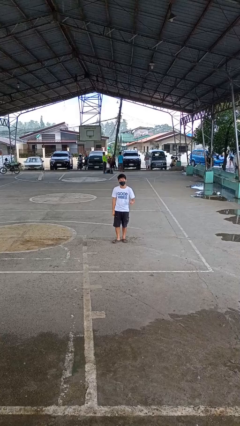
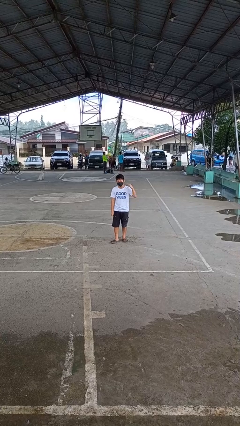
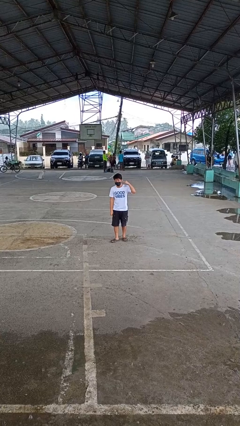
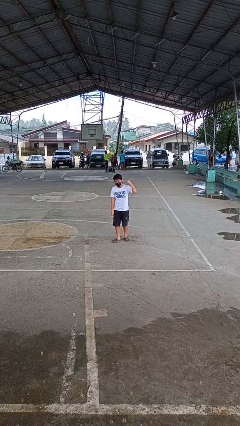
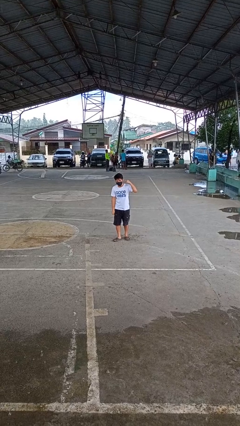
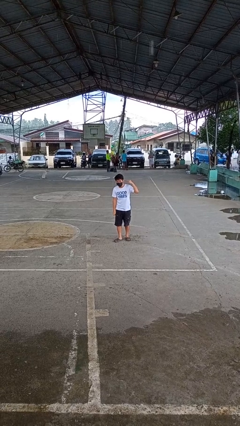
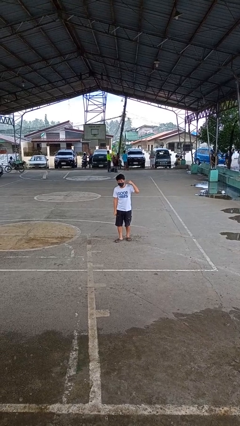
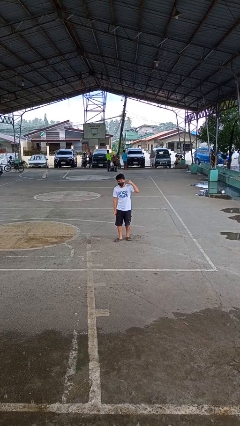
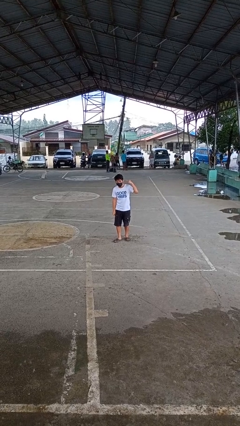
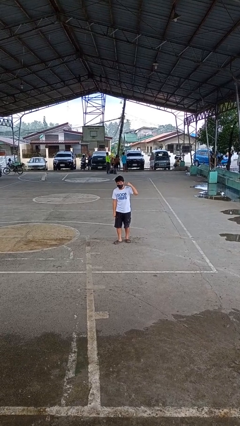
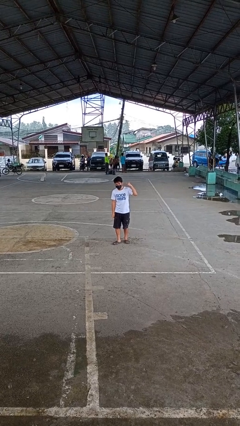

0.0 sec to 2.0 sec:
person gestures listen closely

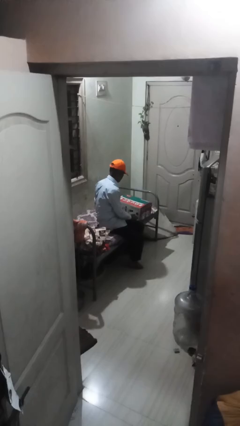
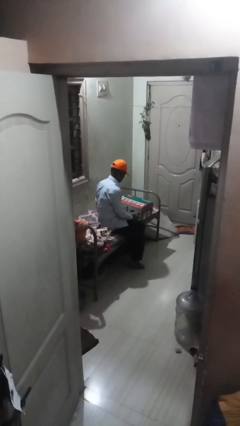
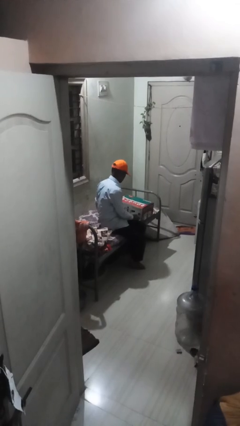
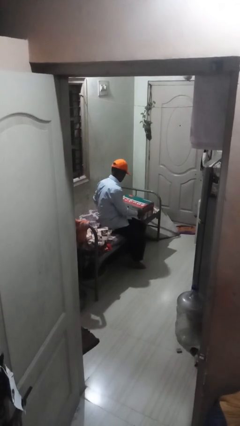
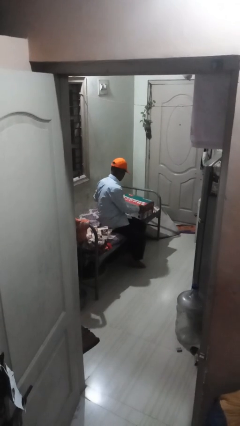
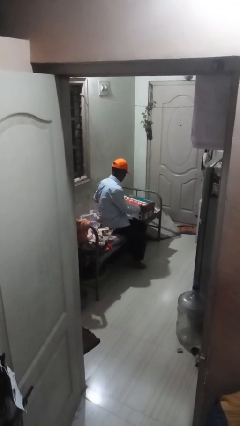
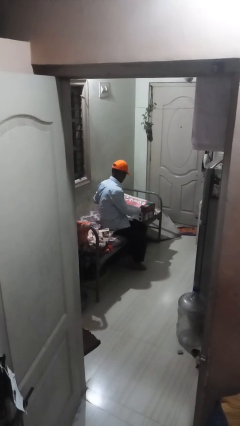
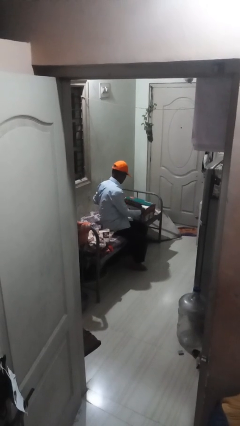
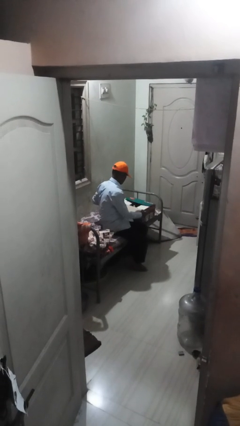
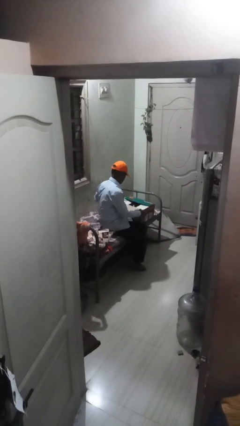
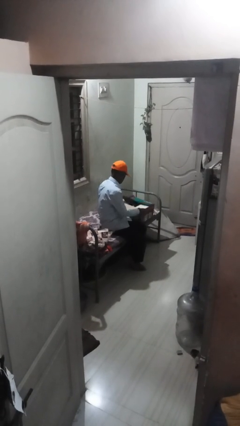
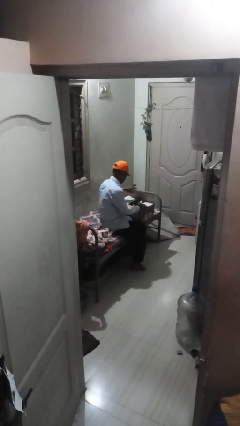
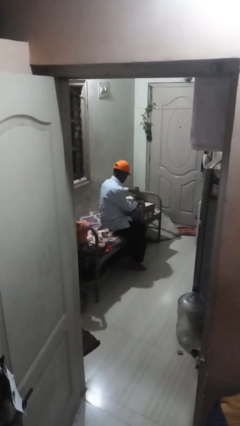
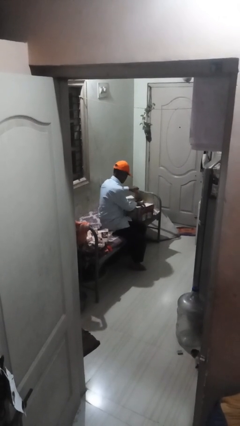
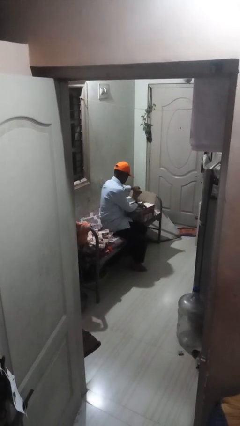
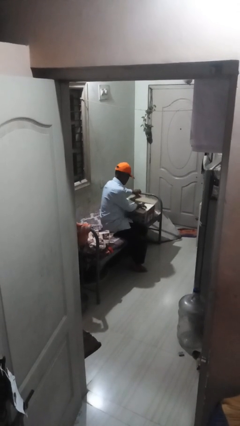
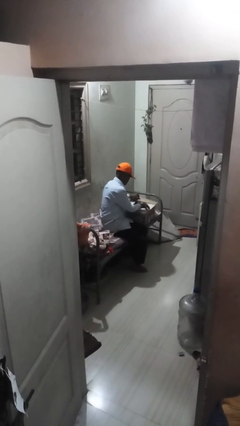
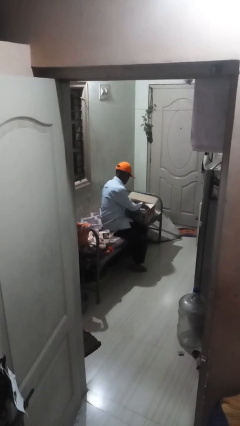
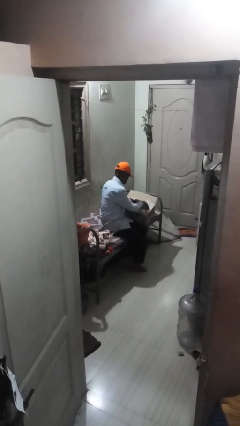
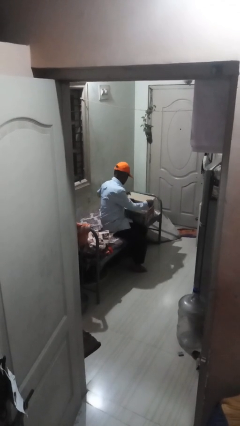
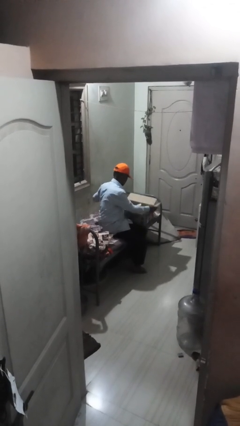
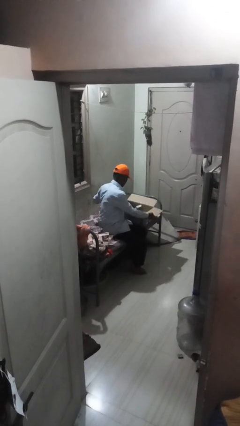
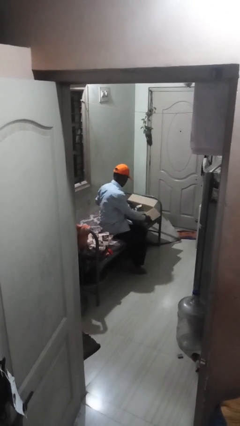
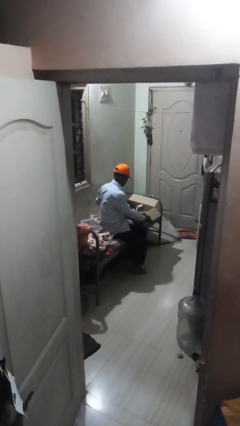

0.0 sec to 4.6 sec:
person opens box

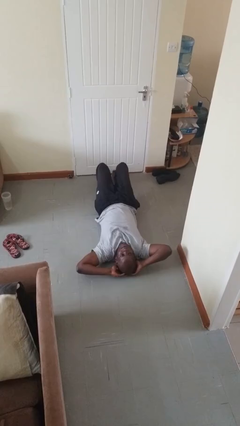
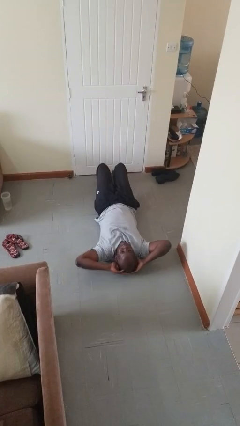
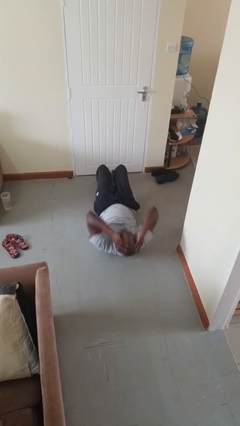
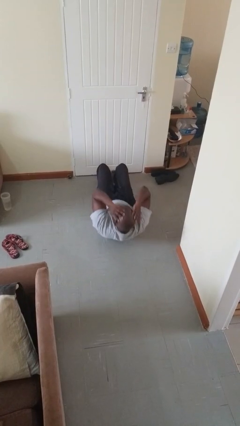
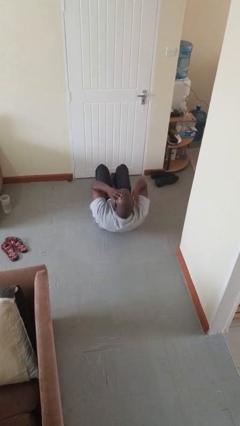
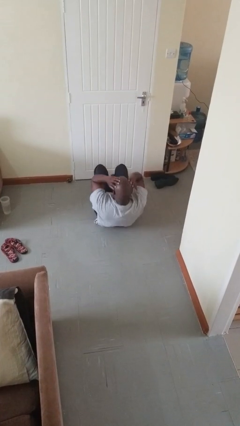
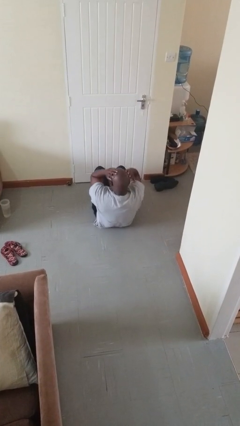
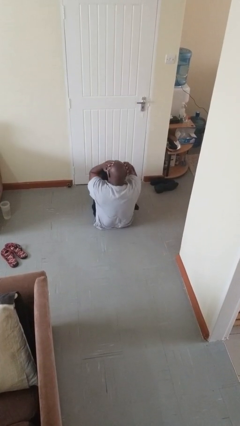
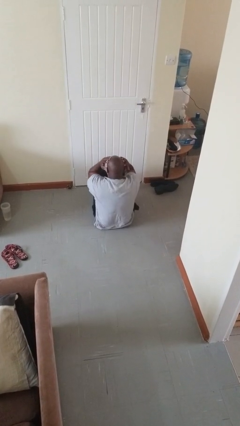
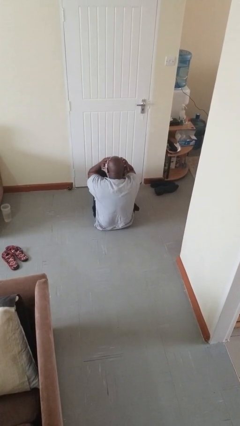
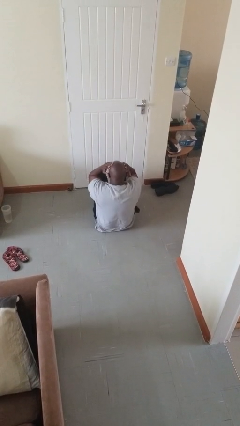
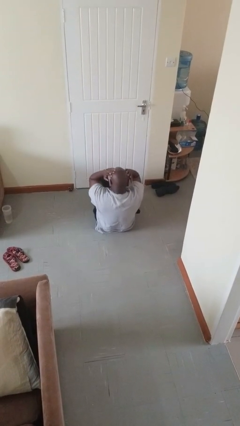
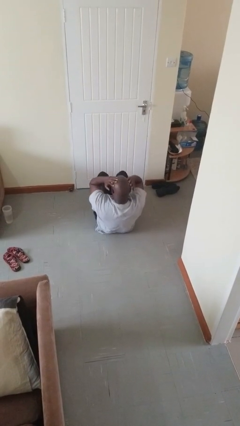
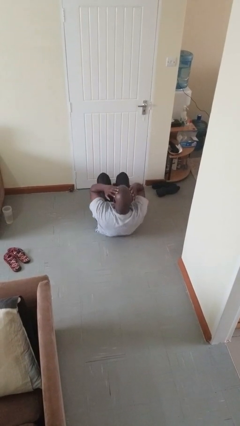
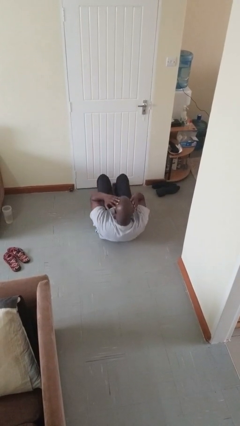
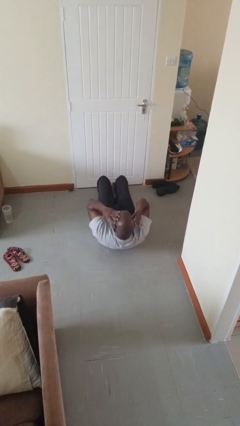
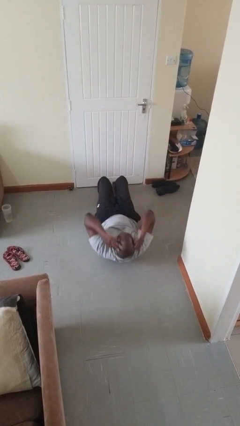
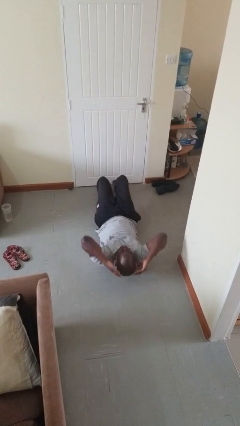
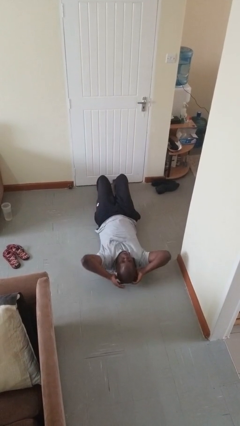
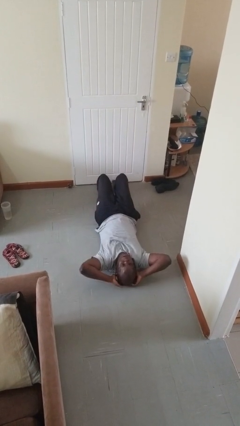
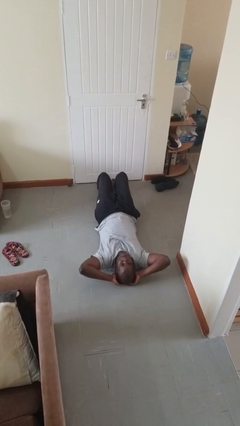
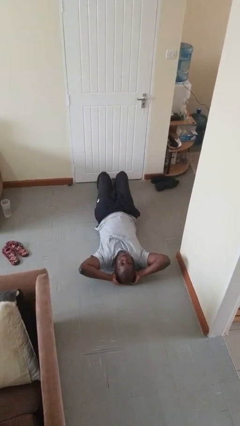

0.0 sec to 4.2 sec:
person exercises with situp

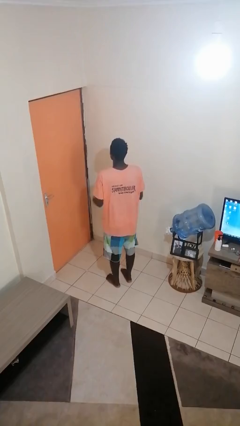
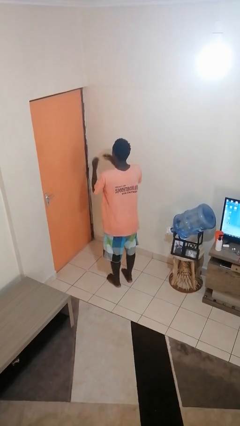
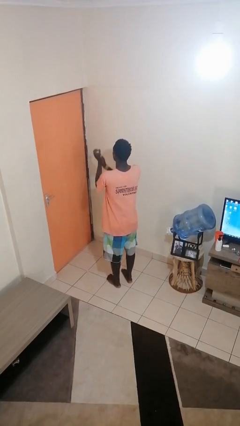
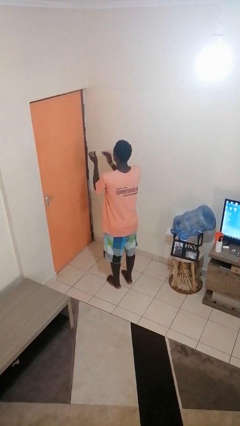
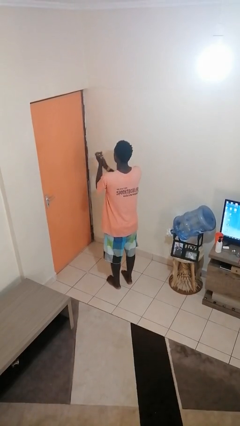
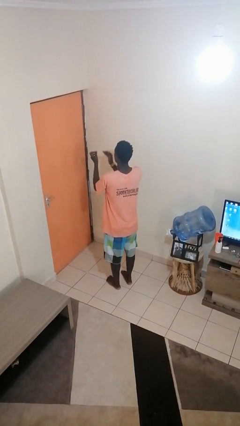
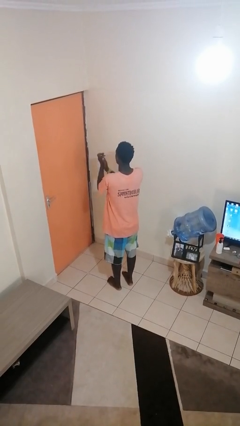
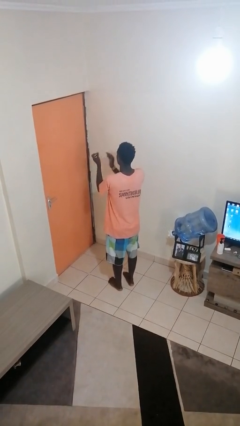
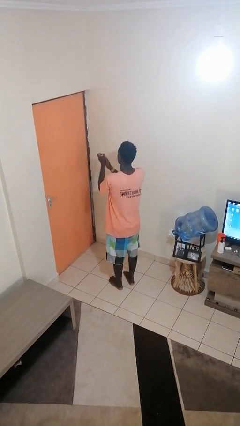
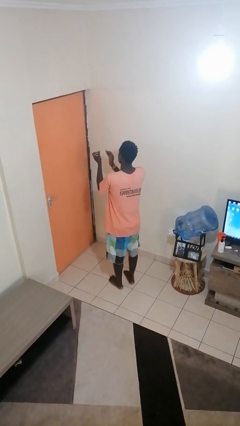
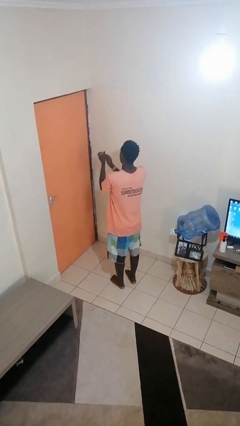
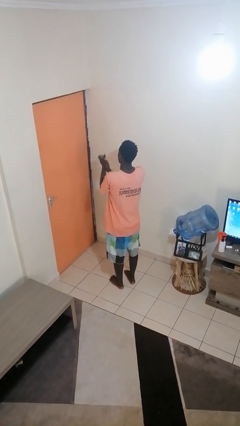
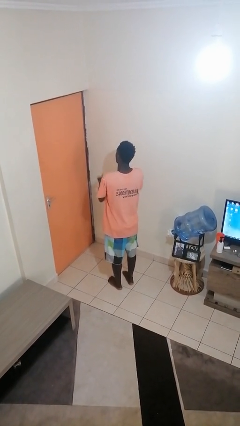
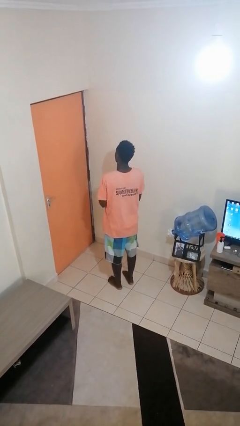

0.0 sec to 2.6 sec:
person claps hands

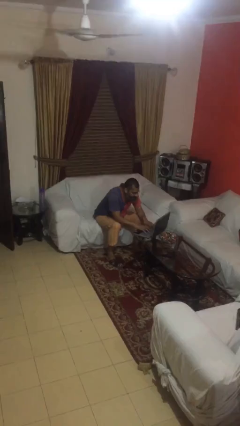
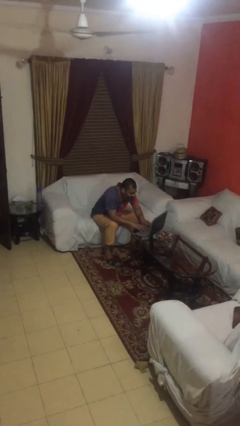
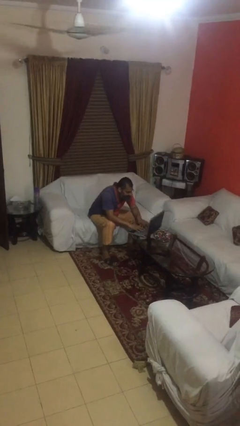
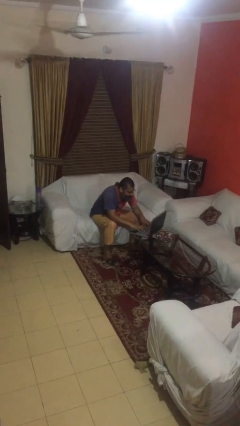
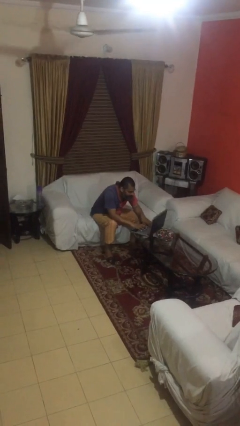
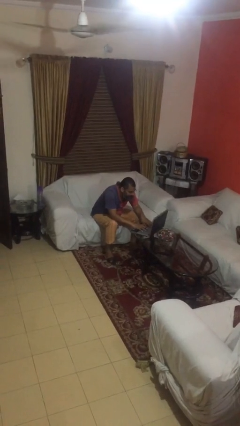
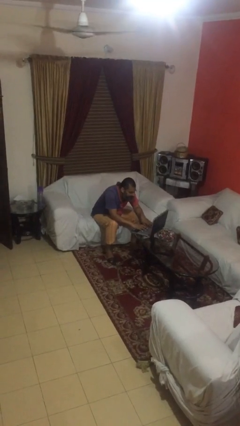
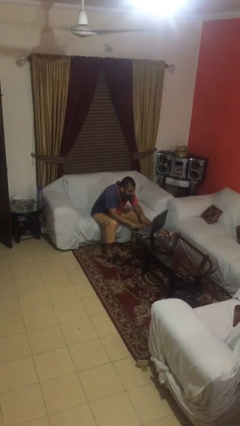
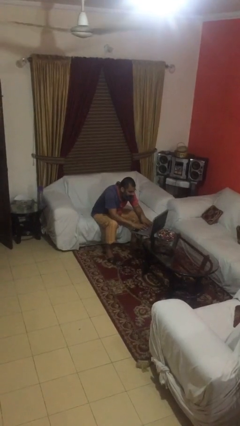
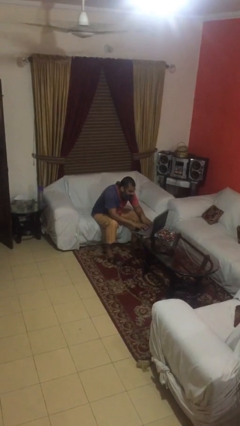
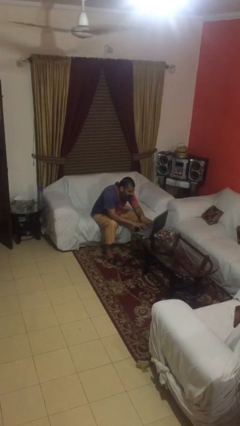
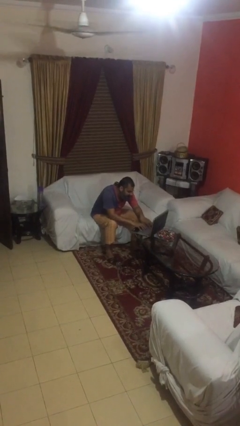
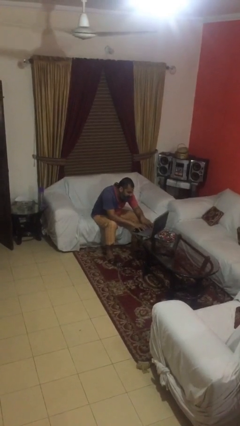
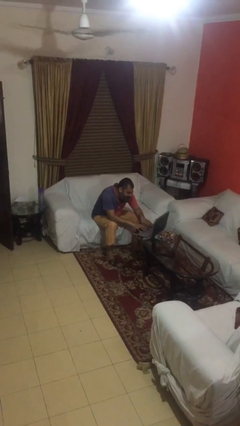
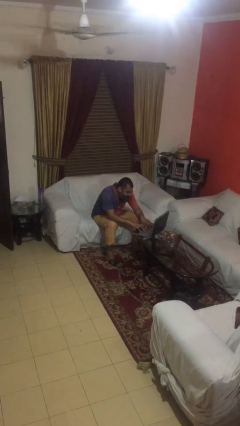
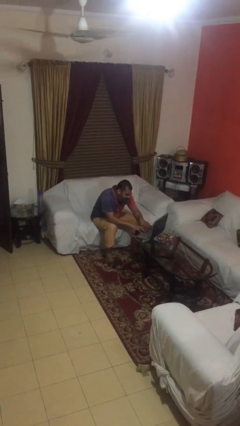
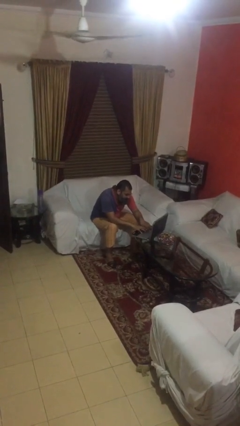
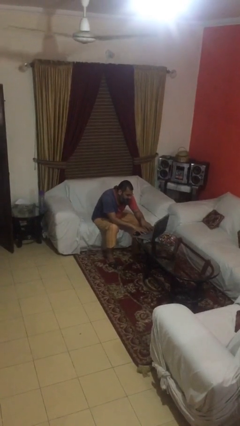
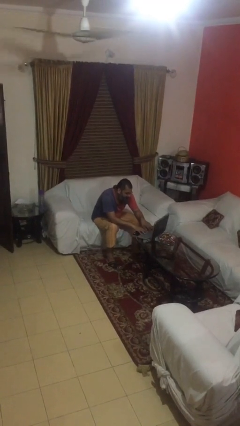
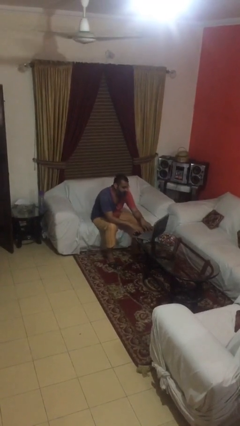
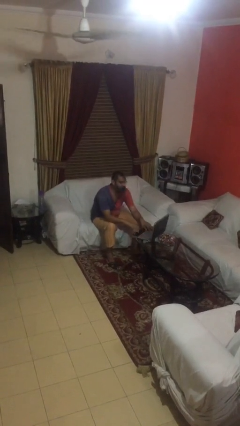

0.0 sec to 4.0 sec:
person interacts with laptop

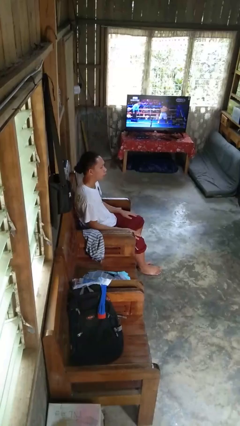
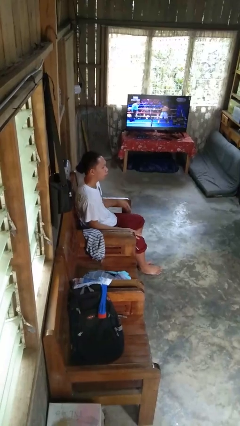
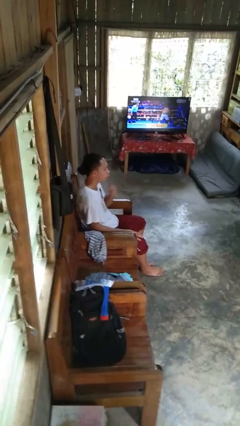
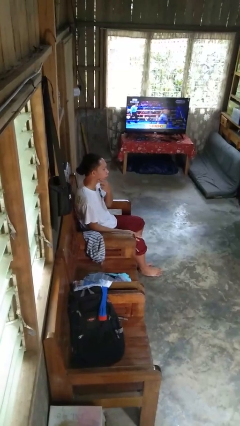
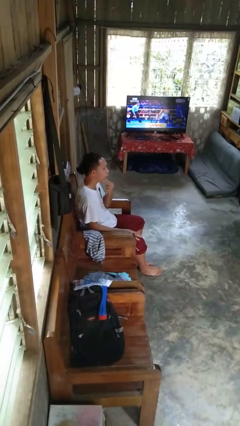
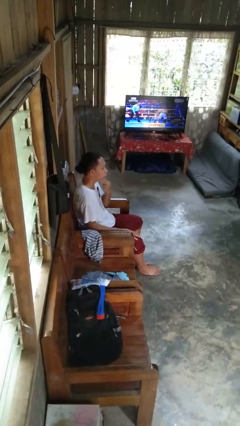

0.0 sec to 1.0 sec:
person strokes chin
